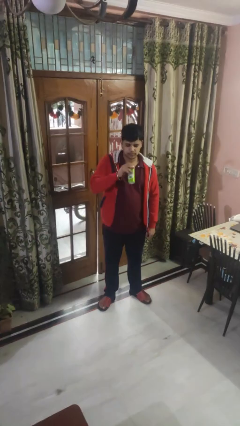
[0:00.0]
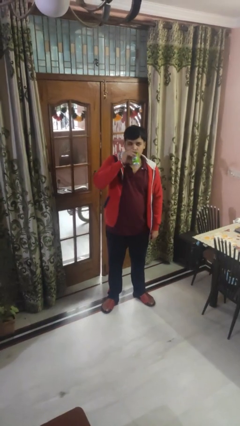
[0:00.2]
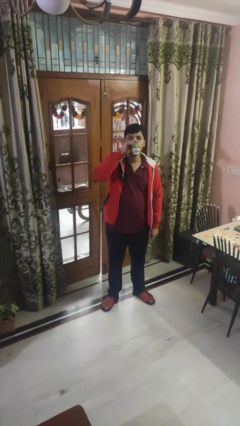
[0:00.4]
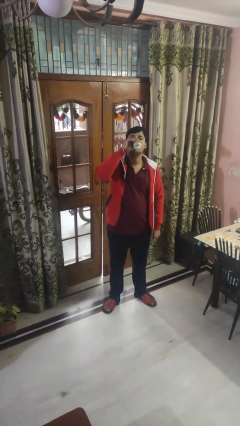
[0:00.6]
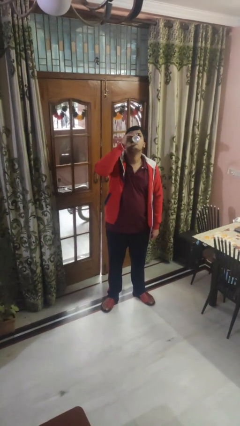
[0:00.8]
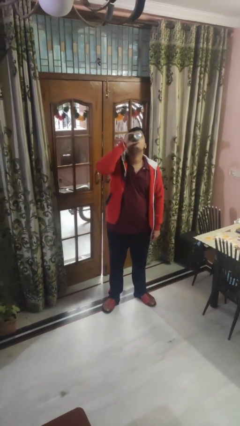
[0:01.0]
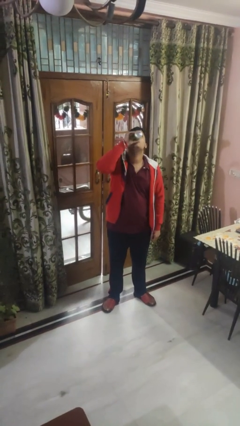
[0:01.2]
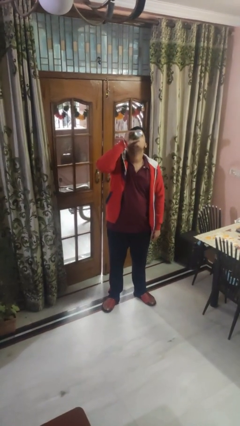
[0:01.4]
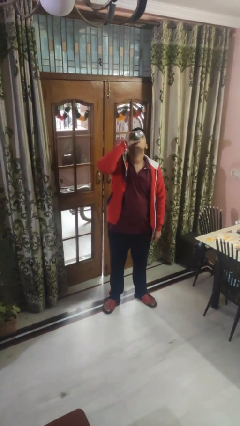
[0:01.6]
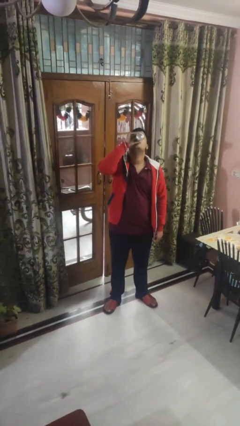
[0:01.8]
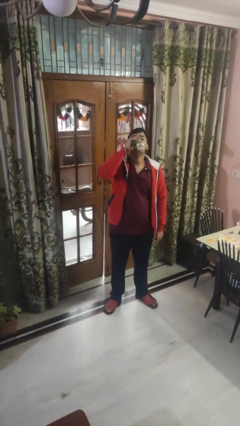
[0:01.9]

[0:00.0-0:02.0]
person drinks from beverage can

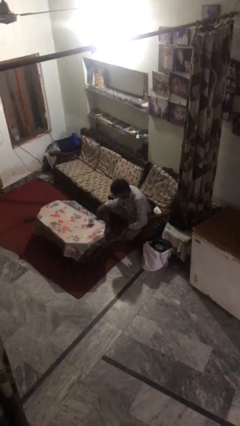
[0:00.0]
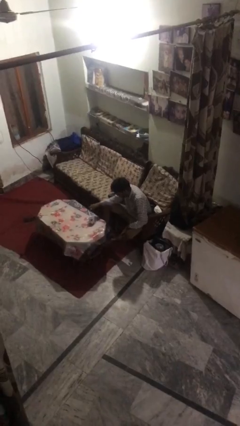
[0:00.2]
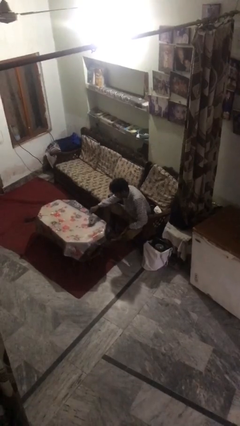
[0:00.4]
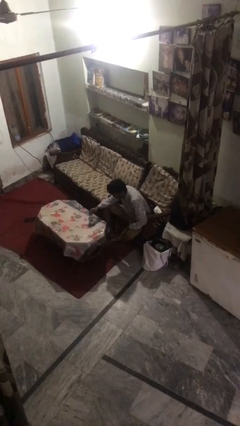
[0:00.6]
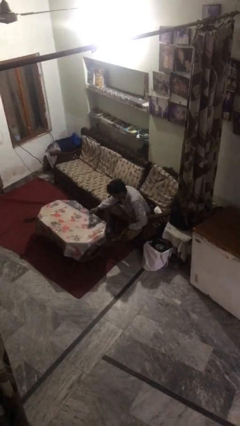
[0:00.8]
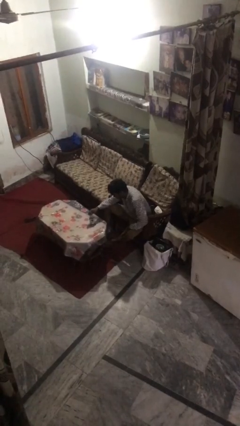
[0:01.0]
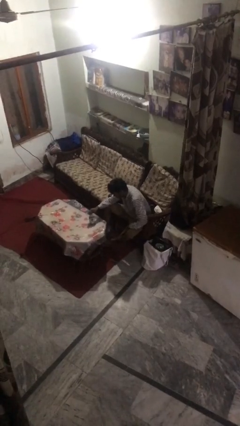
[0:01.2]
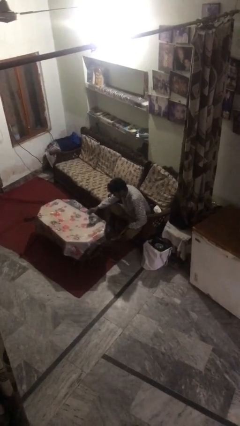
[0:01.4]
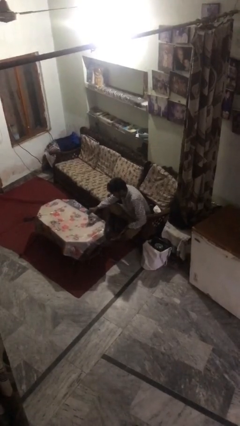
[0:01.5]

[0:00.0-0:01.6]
person stirs mug

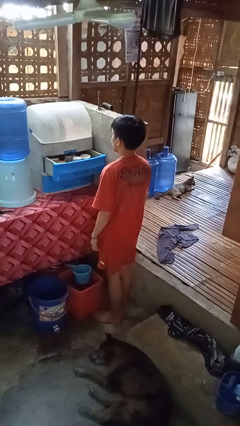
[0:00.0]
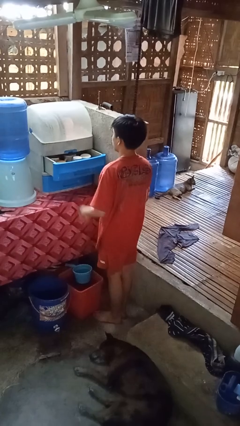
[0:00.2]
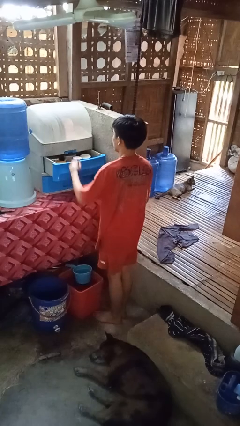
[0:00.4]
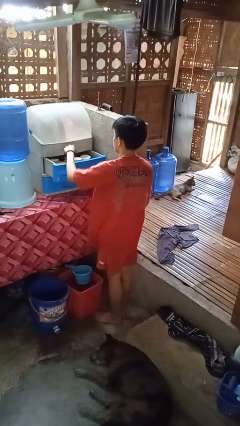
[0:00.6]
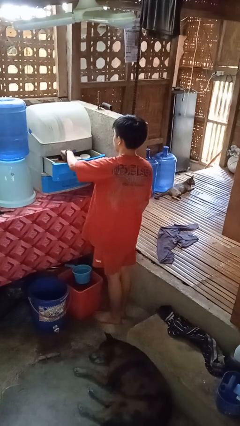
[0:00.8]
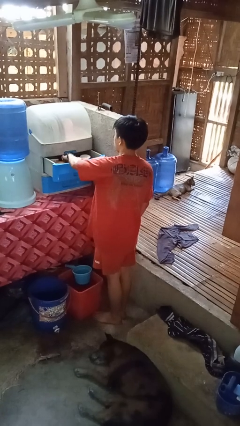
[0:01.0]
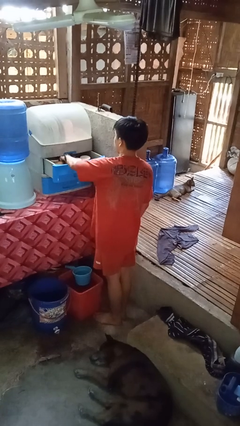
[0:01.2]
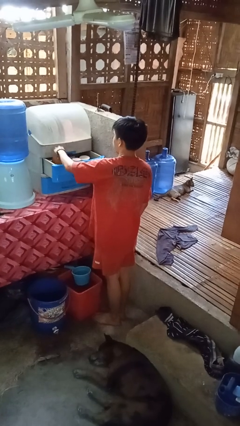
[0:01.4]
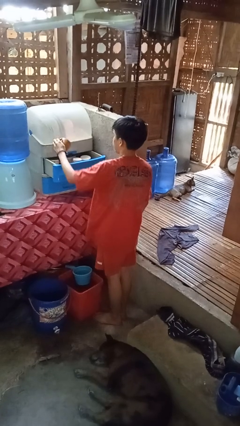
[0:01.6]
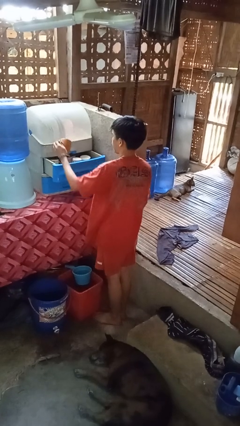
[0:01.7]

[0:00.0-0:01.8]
person picks up object from cabinet

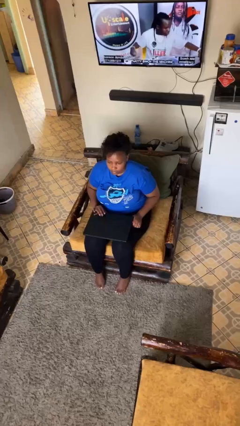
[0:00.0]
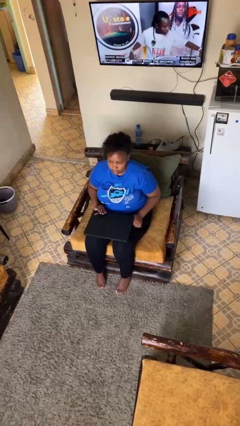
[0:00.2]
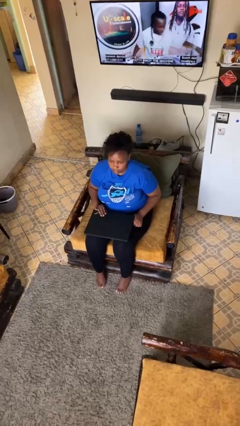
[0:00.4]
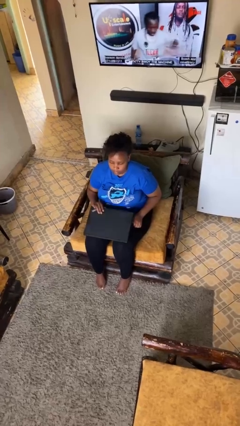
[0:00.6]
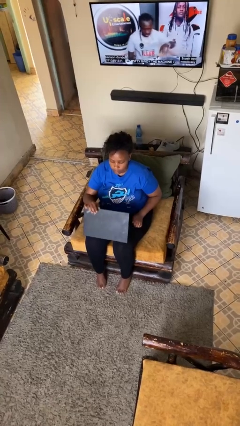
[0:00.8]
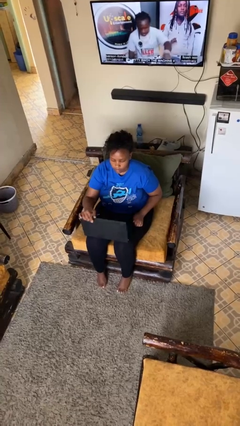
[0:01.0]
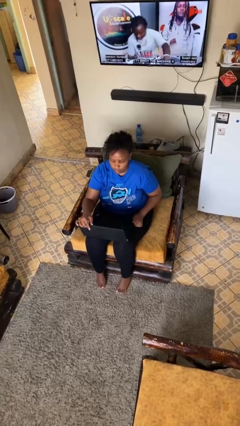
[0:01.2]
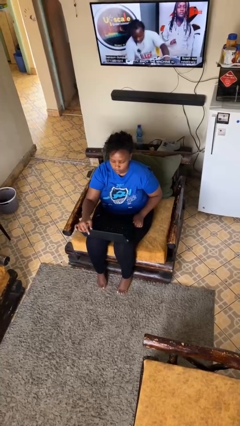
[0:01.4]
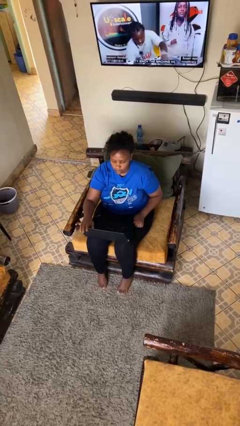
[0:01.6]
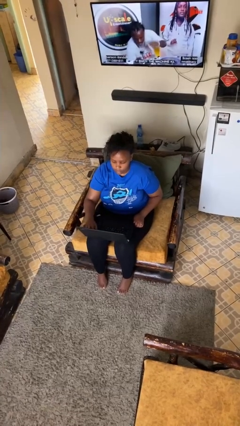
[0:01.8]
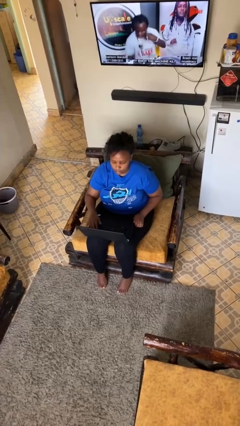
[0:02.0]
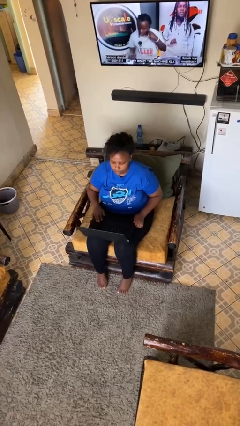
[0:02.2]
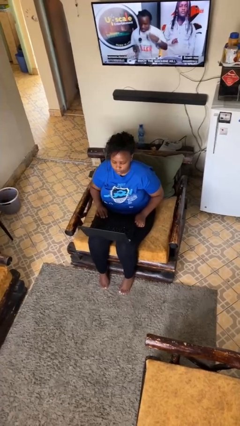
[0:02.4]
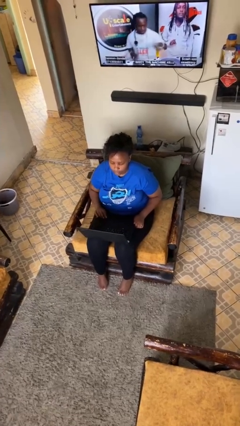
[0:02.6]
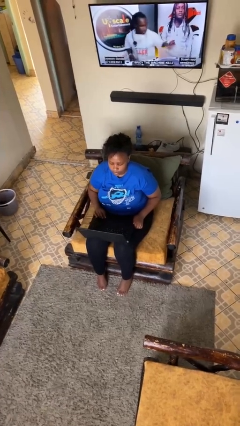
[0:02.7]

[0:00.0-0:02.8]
person opens laptop

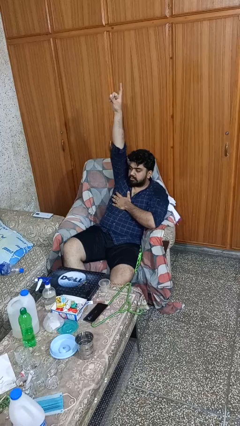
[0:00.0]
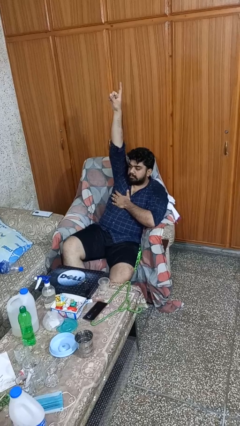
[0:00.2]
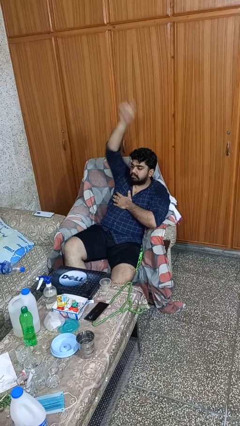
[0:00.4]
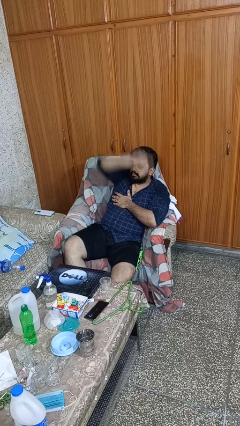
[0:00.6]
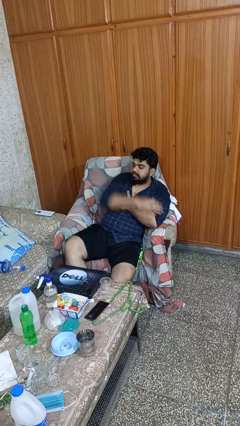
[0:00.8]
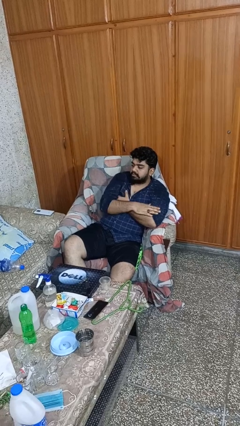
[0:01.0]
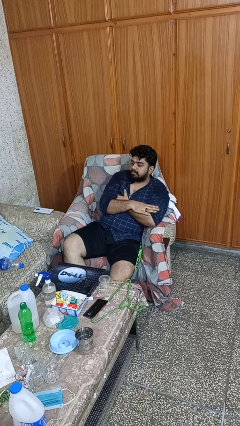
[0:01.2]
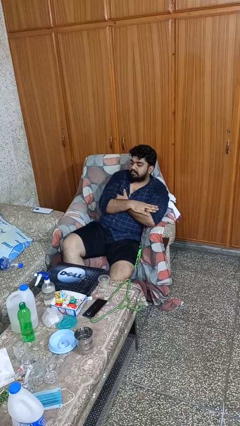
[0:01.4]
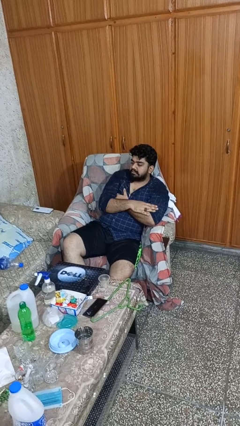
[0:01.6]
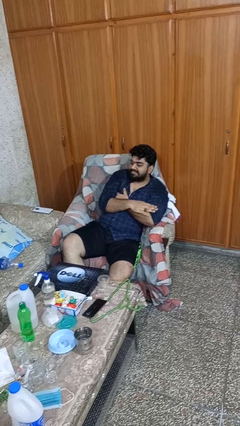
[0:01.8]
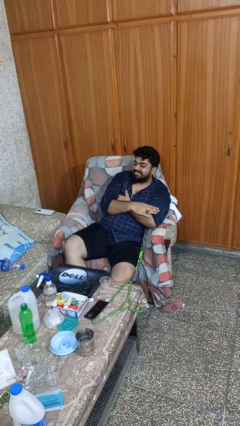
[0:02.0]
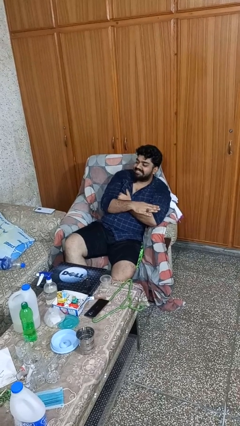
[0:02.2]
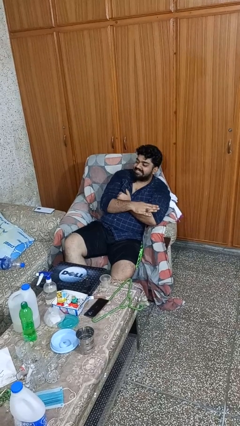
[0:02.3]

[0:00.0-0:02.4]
person gestures lower hand

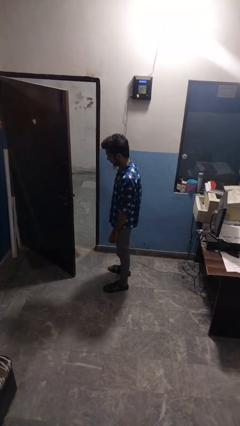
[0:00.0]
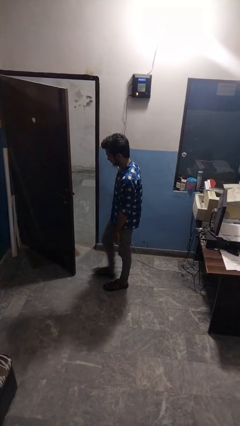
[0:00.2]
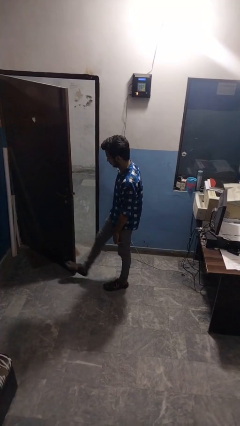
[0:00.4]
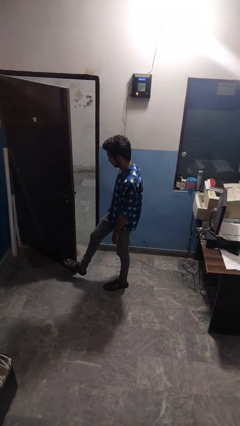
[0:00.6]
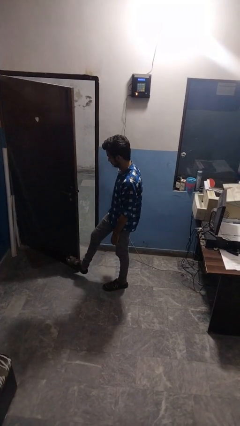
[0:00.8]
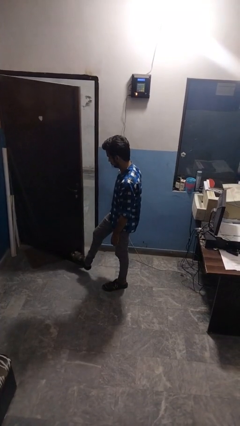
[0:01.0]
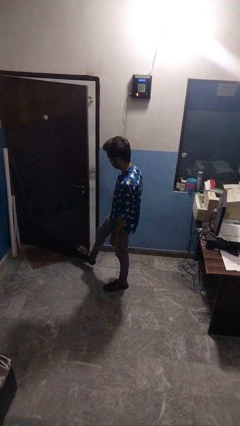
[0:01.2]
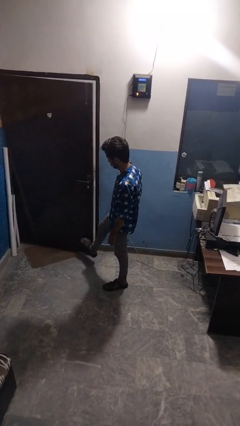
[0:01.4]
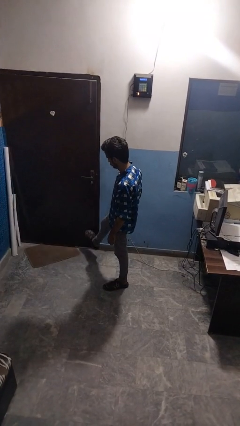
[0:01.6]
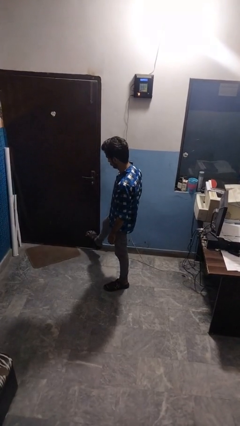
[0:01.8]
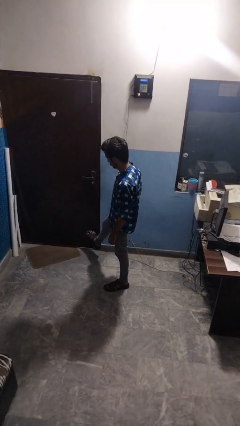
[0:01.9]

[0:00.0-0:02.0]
person closes door with foot

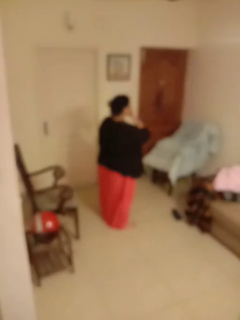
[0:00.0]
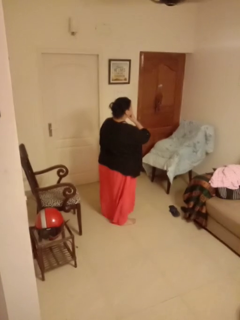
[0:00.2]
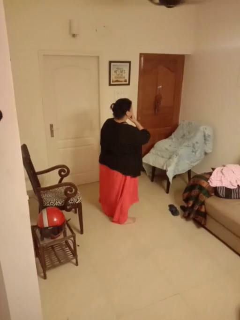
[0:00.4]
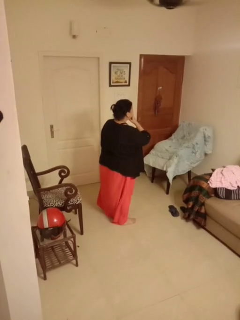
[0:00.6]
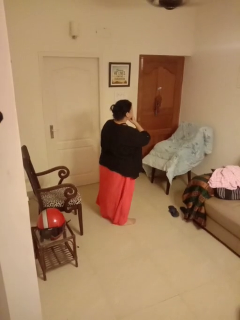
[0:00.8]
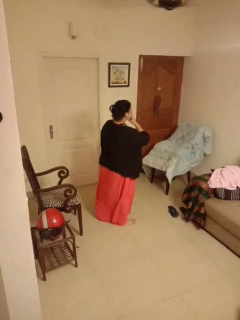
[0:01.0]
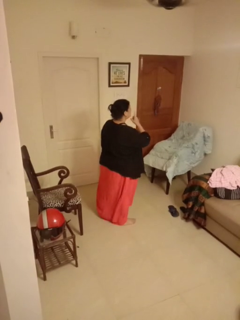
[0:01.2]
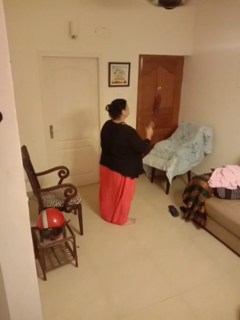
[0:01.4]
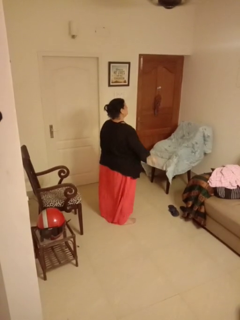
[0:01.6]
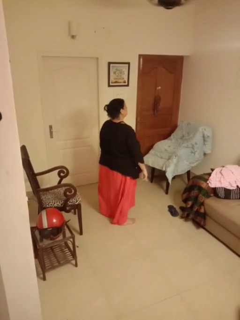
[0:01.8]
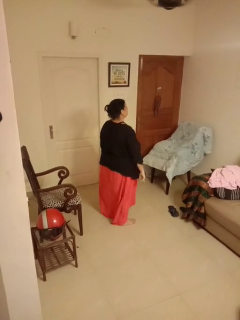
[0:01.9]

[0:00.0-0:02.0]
person gestures be quiet

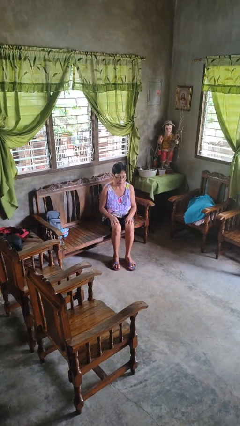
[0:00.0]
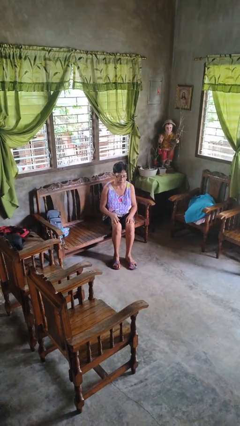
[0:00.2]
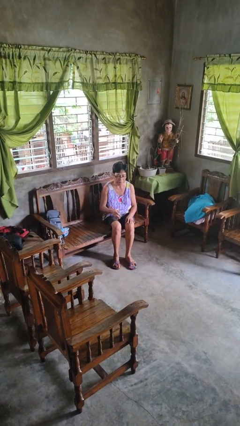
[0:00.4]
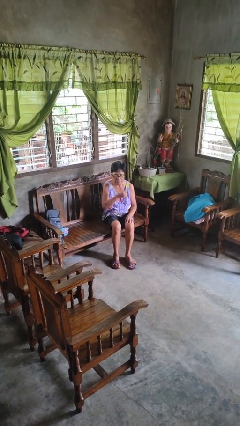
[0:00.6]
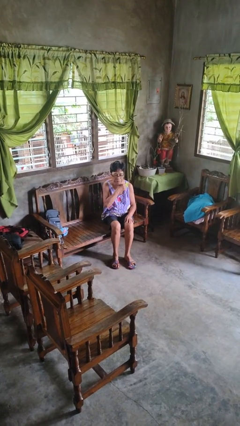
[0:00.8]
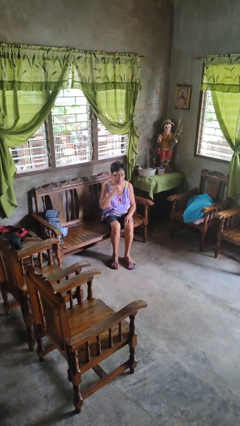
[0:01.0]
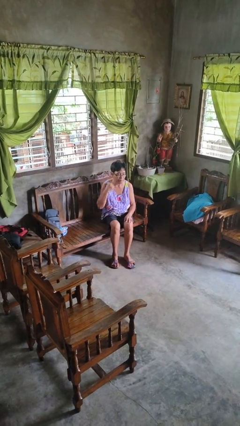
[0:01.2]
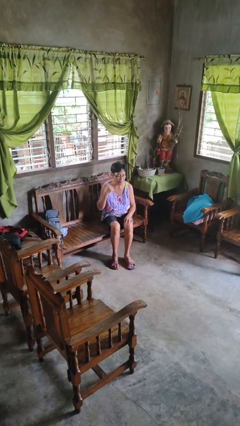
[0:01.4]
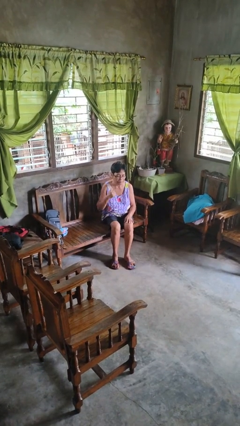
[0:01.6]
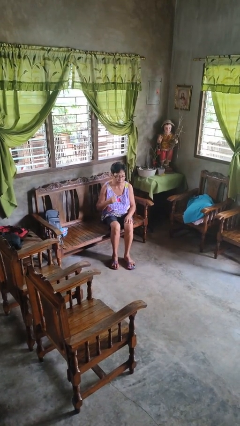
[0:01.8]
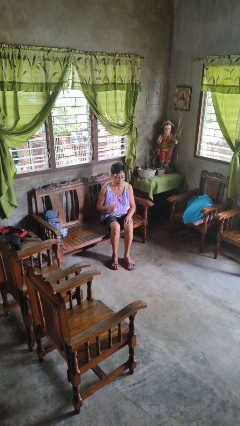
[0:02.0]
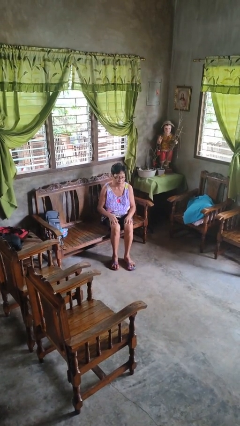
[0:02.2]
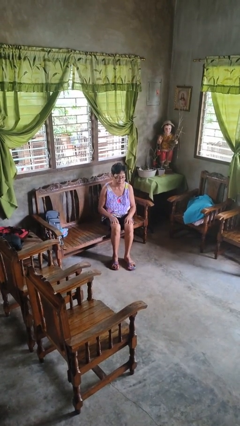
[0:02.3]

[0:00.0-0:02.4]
person gestures cut
